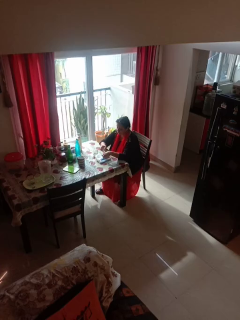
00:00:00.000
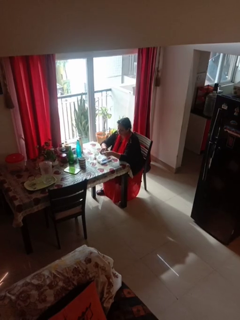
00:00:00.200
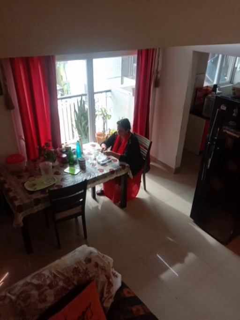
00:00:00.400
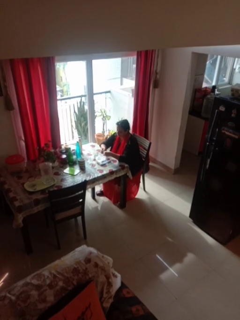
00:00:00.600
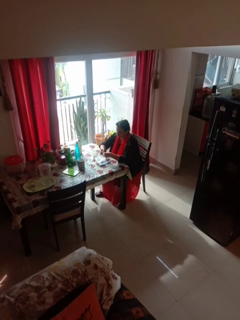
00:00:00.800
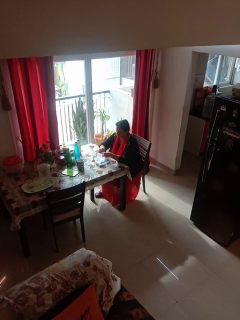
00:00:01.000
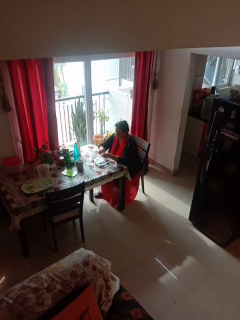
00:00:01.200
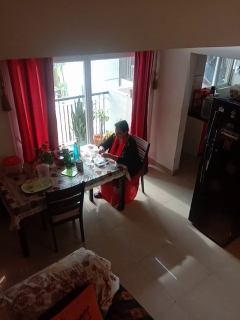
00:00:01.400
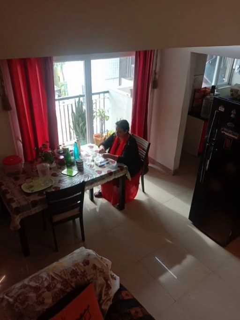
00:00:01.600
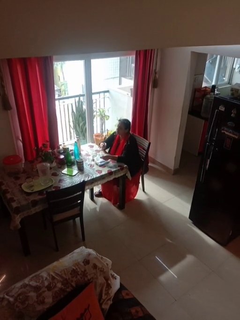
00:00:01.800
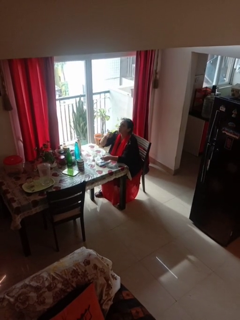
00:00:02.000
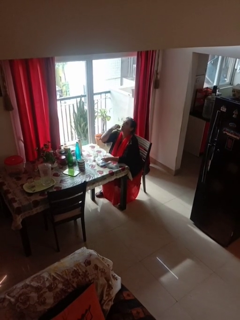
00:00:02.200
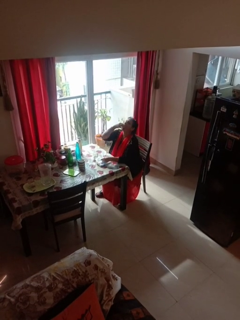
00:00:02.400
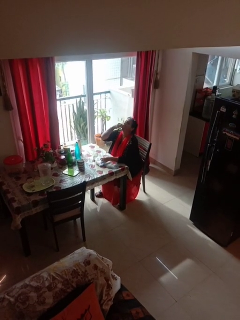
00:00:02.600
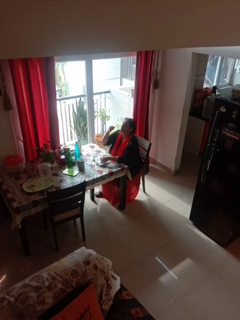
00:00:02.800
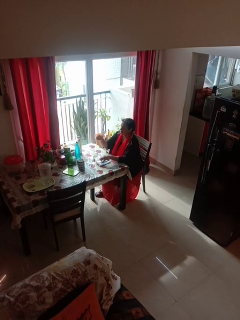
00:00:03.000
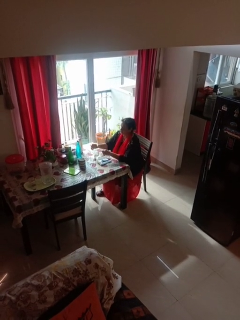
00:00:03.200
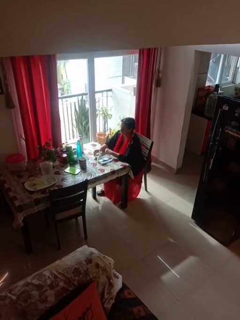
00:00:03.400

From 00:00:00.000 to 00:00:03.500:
person takes medicine pills

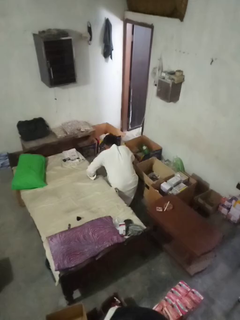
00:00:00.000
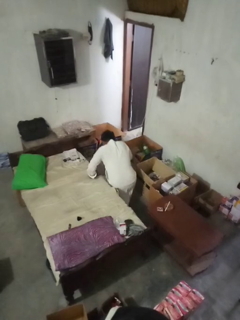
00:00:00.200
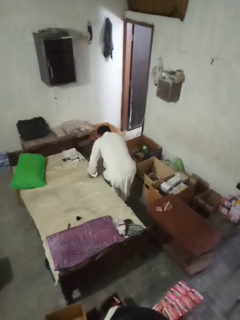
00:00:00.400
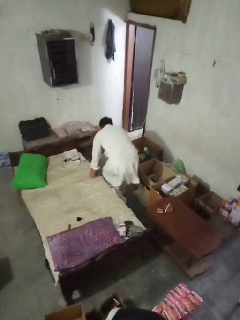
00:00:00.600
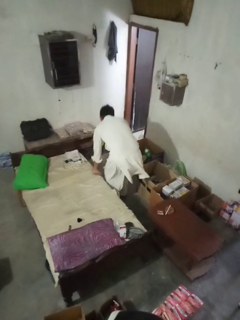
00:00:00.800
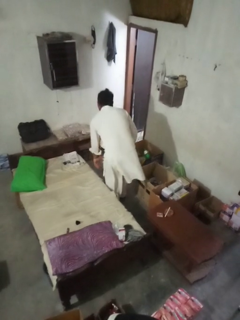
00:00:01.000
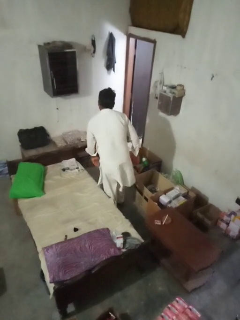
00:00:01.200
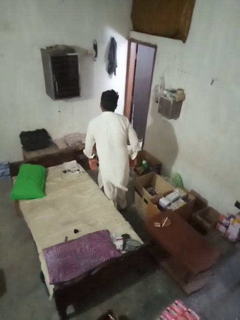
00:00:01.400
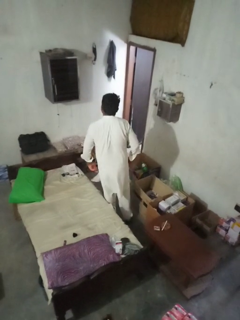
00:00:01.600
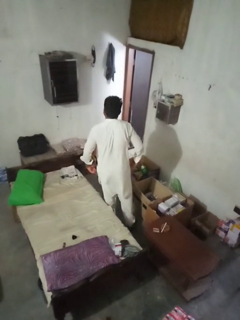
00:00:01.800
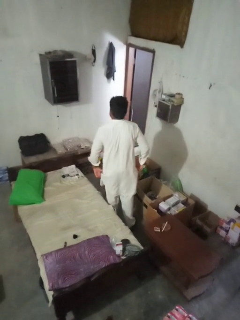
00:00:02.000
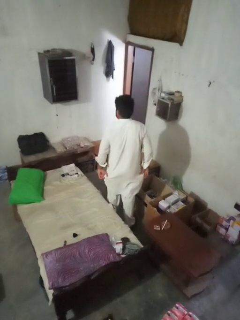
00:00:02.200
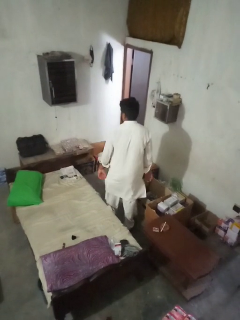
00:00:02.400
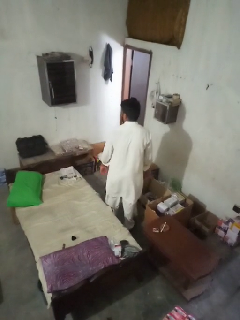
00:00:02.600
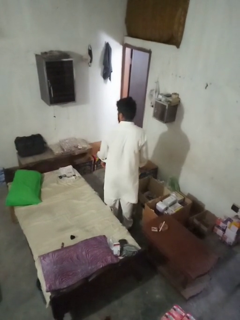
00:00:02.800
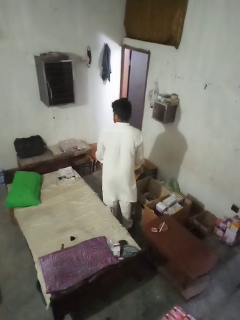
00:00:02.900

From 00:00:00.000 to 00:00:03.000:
person stands up from floor

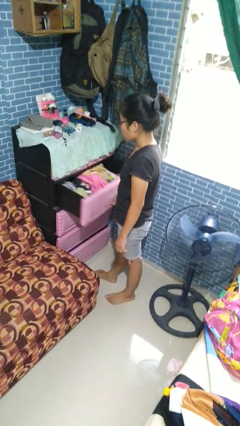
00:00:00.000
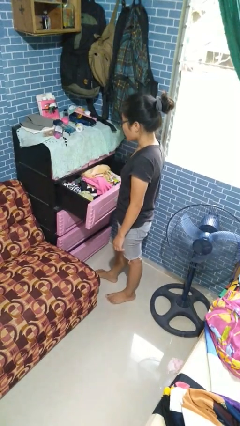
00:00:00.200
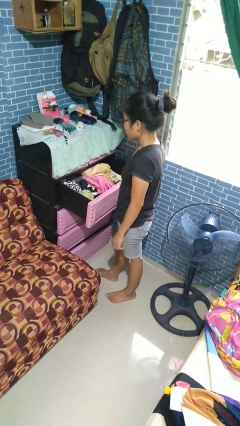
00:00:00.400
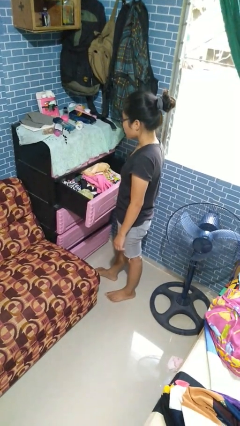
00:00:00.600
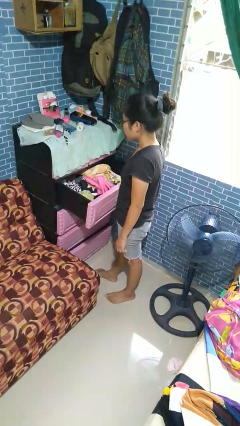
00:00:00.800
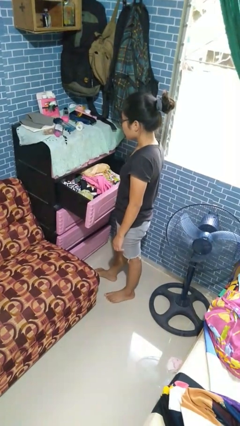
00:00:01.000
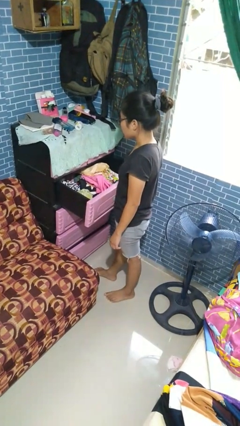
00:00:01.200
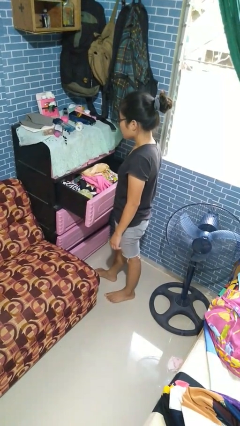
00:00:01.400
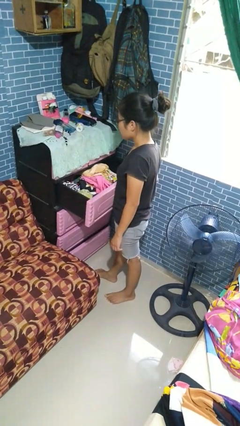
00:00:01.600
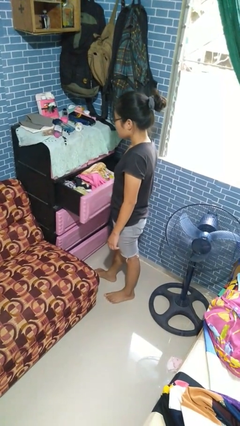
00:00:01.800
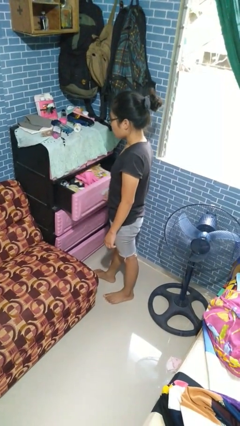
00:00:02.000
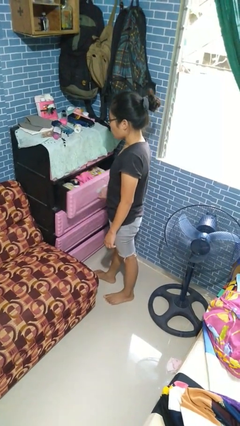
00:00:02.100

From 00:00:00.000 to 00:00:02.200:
person opens dresser drawer

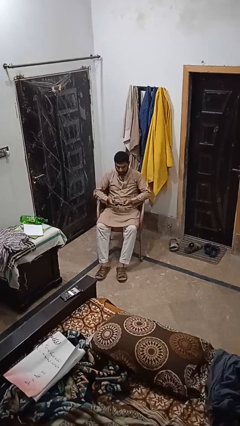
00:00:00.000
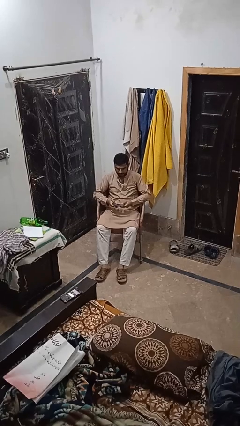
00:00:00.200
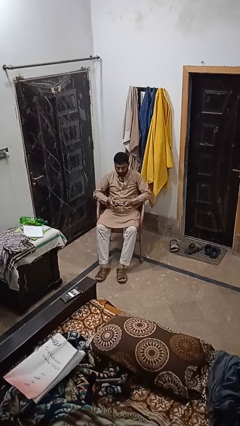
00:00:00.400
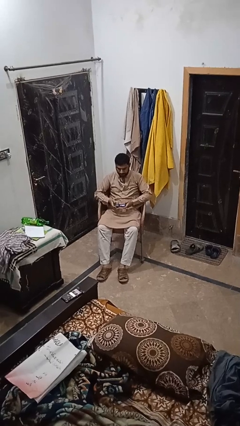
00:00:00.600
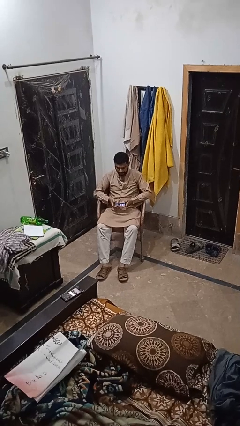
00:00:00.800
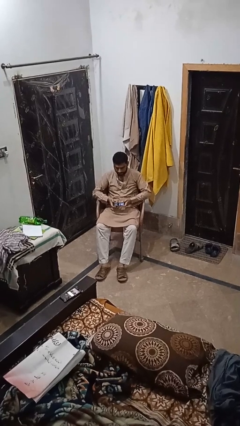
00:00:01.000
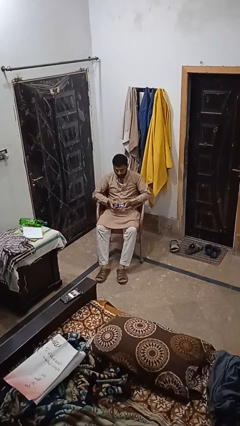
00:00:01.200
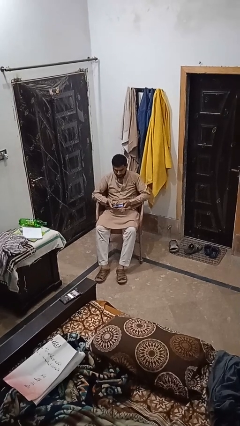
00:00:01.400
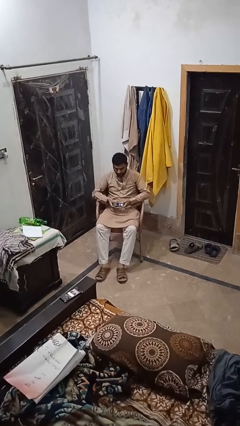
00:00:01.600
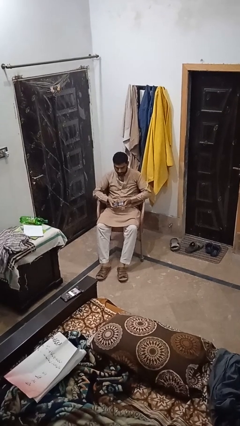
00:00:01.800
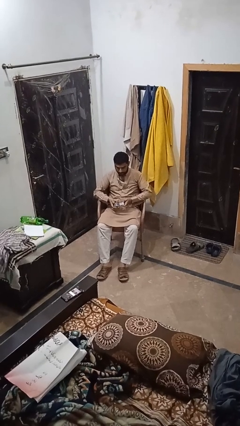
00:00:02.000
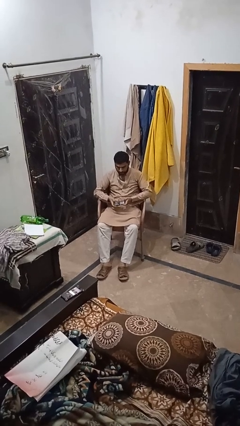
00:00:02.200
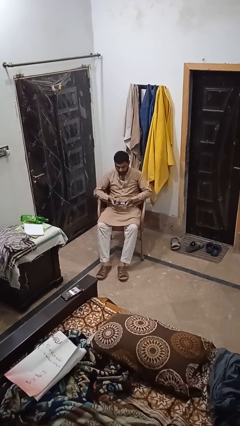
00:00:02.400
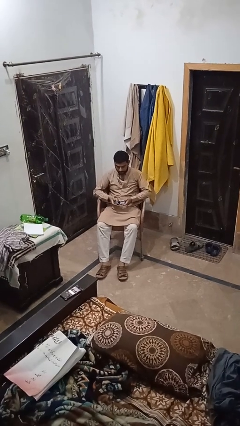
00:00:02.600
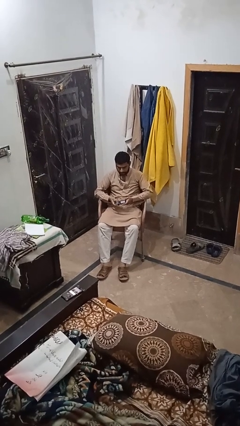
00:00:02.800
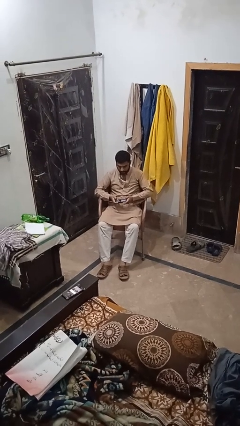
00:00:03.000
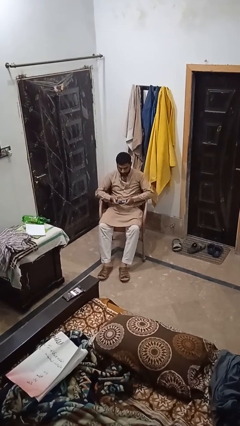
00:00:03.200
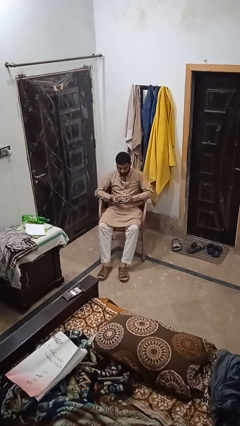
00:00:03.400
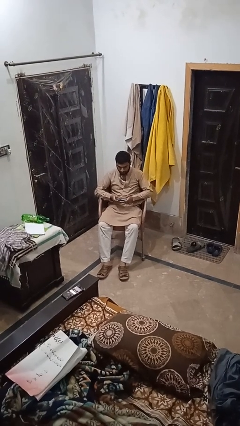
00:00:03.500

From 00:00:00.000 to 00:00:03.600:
person interacts with handheld game

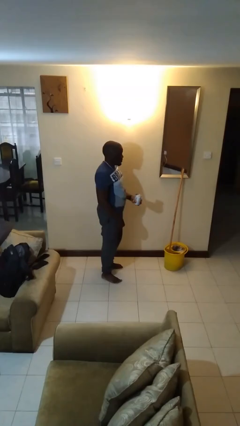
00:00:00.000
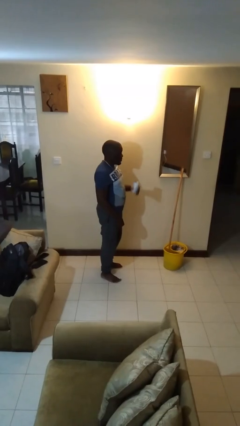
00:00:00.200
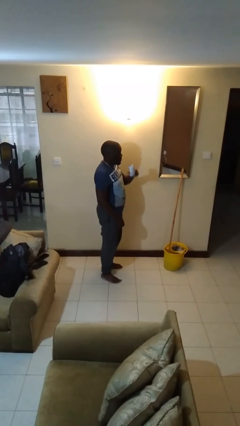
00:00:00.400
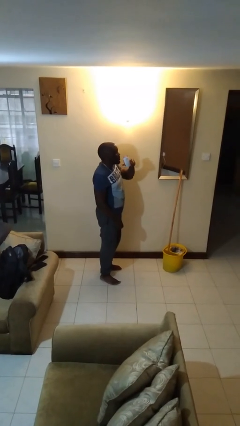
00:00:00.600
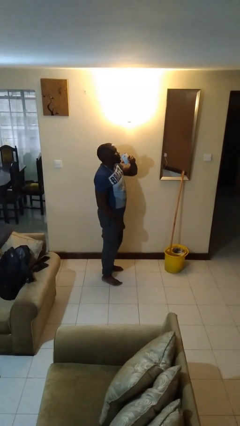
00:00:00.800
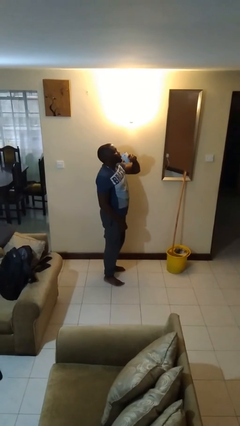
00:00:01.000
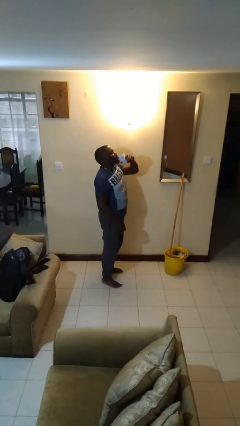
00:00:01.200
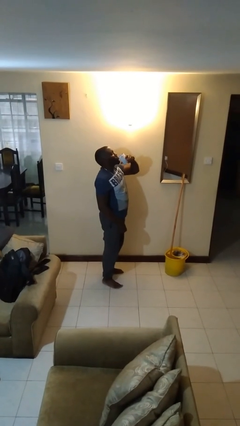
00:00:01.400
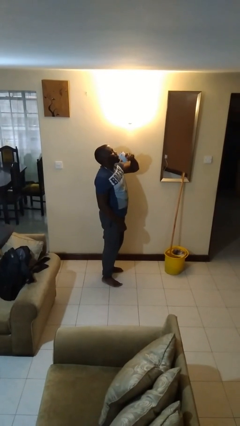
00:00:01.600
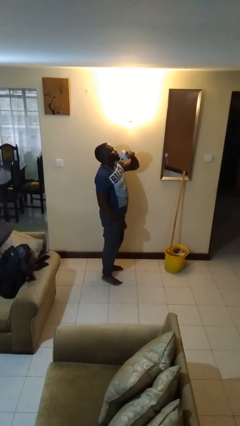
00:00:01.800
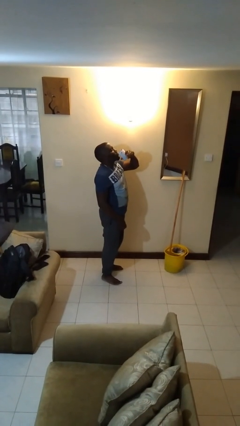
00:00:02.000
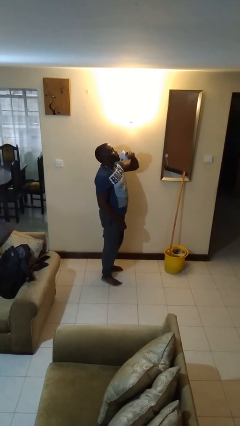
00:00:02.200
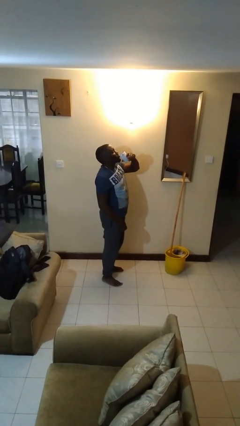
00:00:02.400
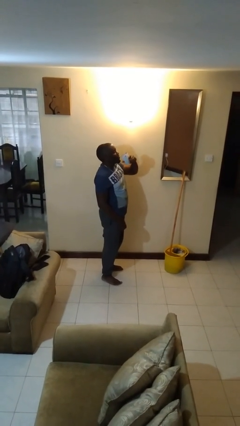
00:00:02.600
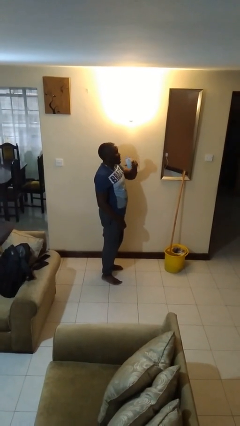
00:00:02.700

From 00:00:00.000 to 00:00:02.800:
person drinks from beverage can

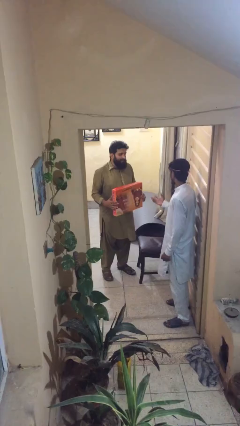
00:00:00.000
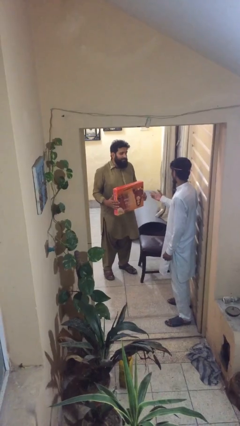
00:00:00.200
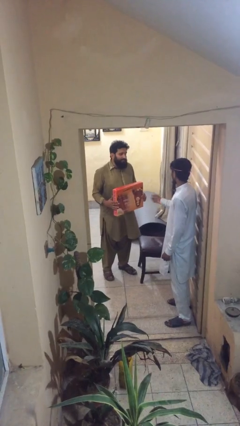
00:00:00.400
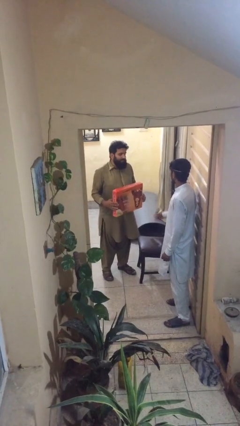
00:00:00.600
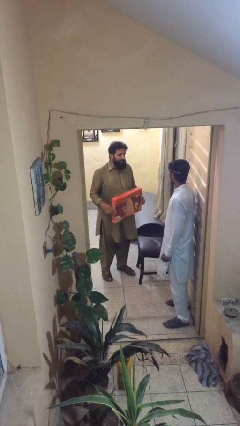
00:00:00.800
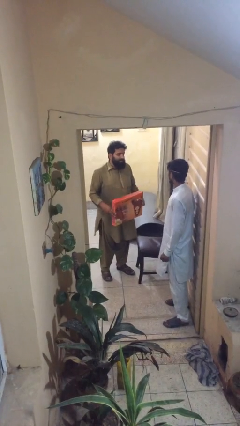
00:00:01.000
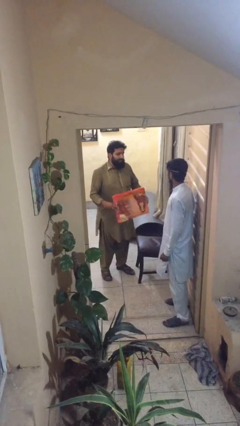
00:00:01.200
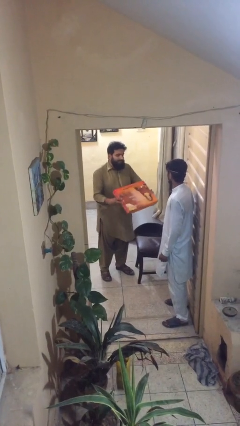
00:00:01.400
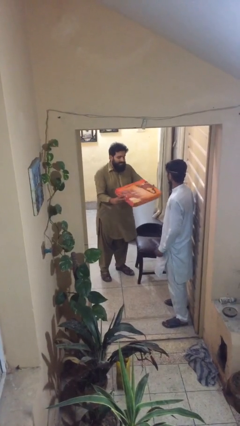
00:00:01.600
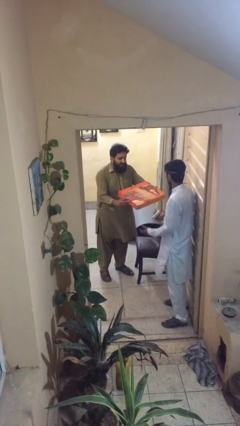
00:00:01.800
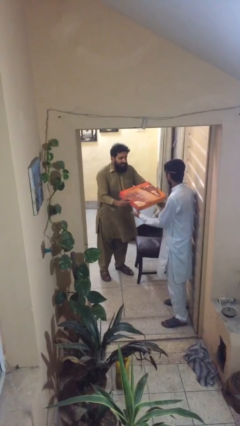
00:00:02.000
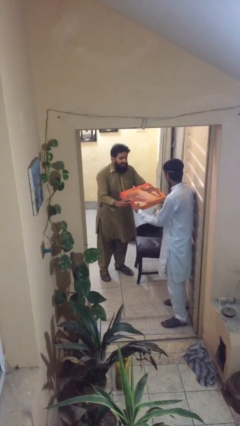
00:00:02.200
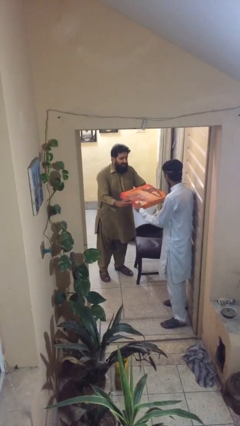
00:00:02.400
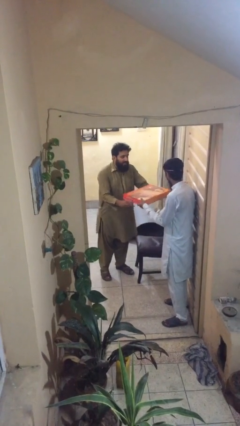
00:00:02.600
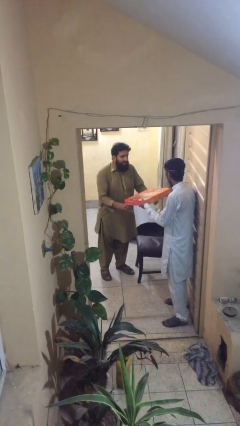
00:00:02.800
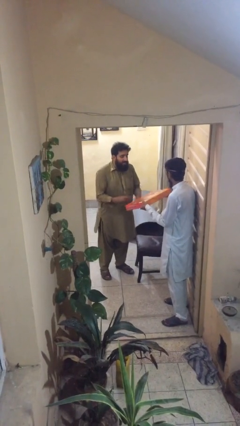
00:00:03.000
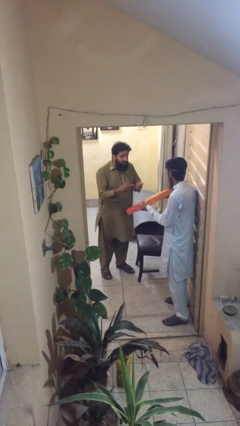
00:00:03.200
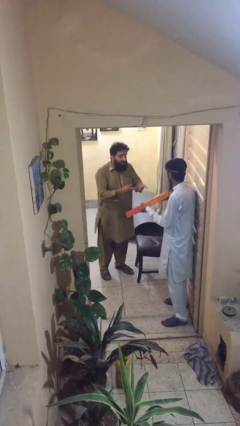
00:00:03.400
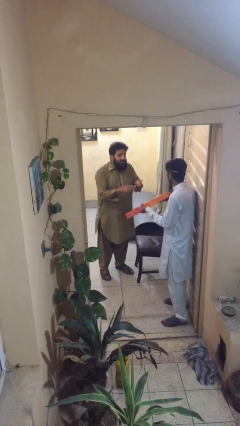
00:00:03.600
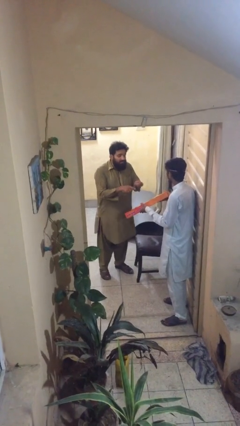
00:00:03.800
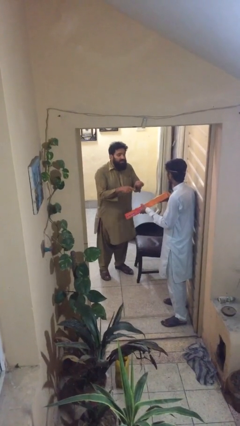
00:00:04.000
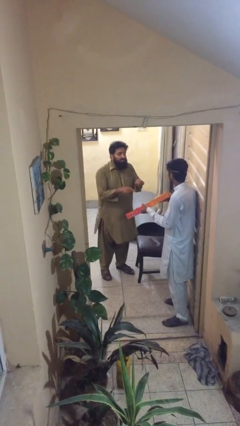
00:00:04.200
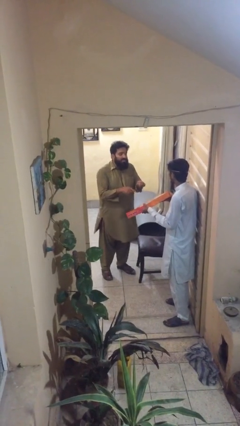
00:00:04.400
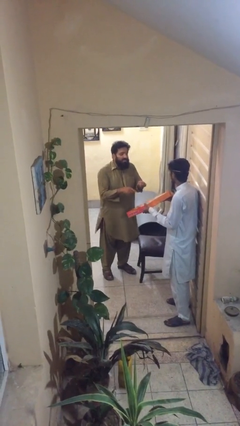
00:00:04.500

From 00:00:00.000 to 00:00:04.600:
person transfers object to person
